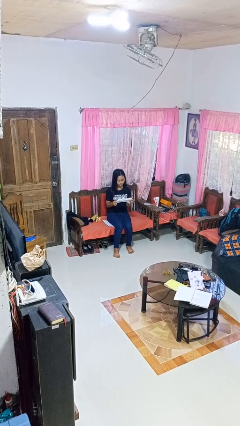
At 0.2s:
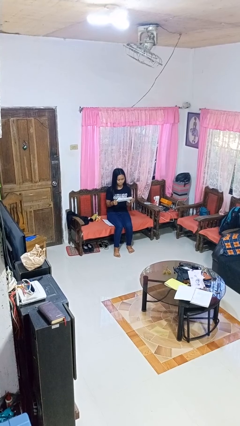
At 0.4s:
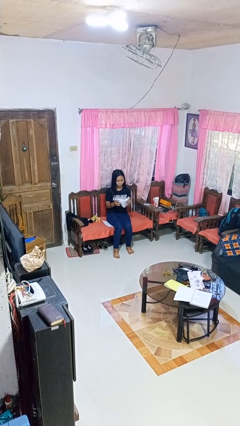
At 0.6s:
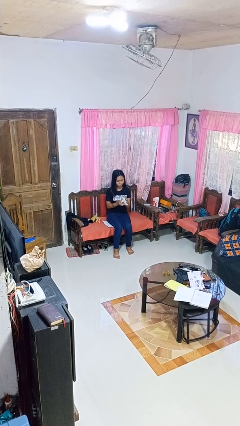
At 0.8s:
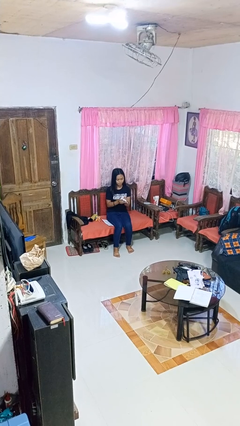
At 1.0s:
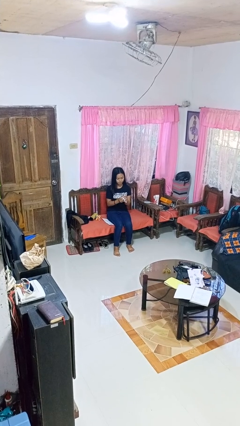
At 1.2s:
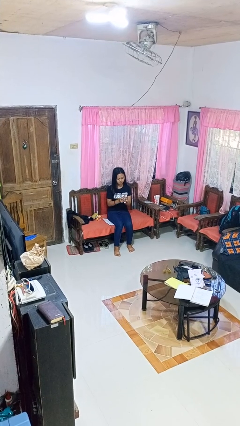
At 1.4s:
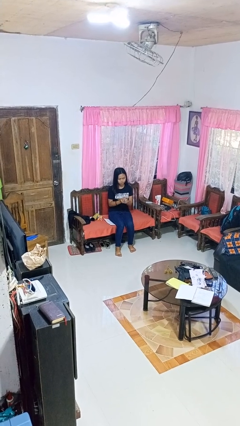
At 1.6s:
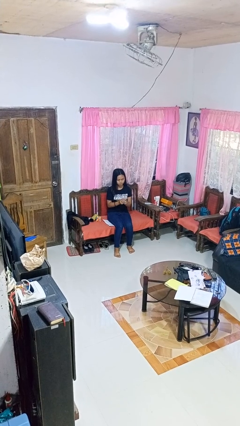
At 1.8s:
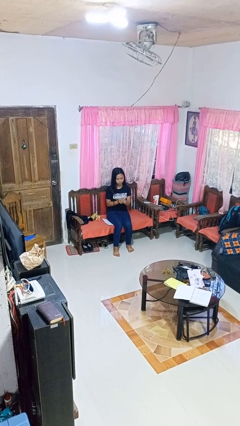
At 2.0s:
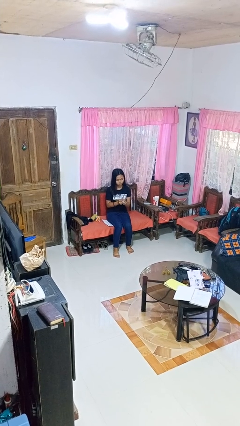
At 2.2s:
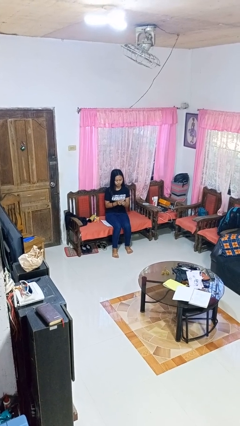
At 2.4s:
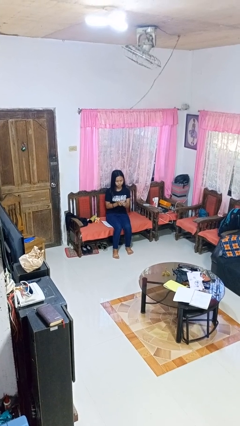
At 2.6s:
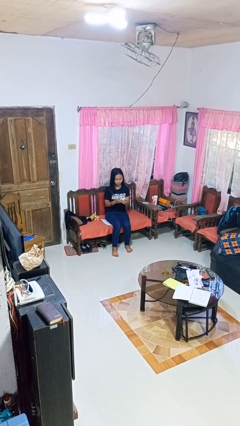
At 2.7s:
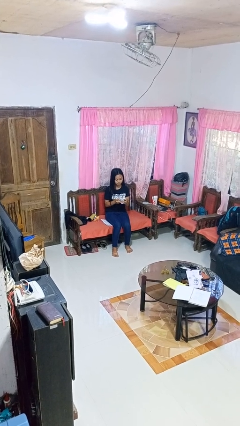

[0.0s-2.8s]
person crumples paper

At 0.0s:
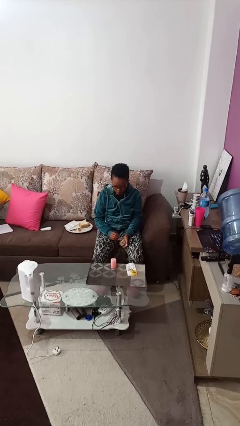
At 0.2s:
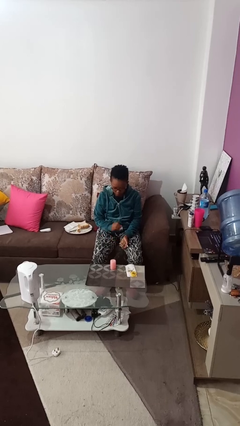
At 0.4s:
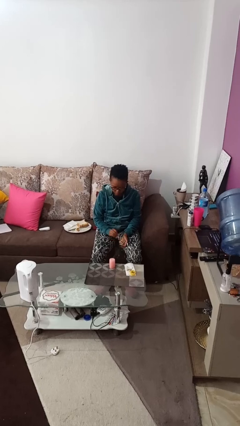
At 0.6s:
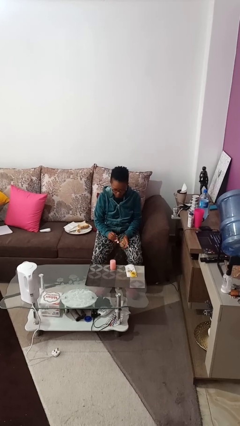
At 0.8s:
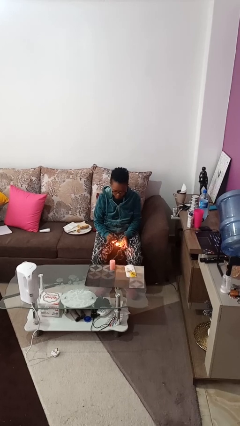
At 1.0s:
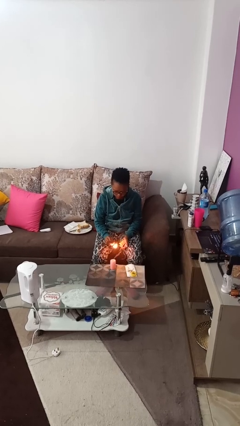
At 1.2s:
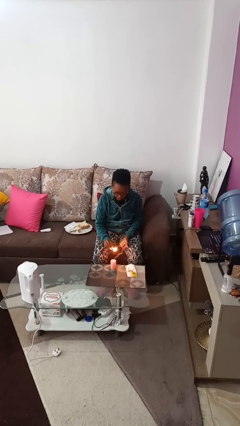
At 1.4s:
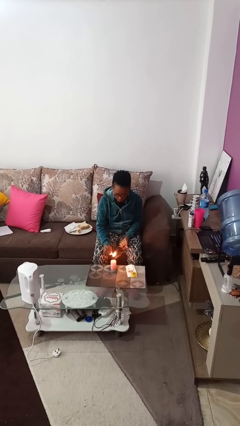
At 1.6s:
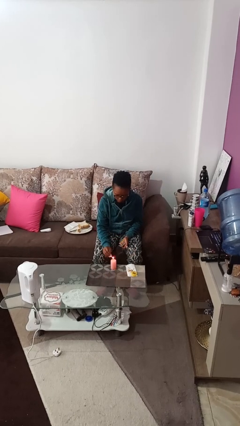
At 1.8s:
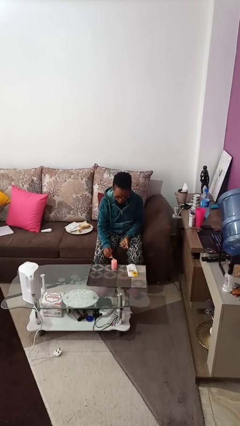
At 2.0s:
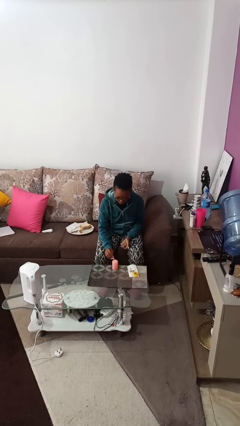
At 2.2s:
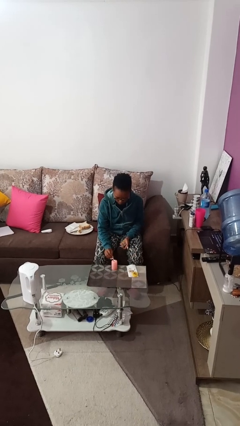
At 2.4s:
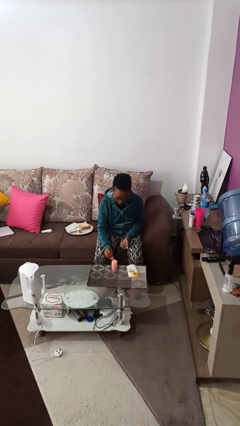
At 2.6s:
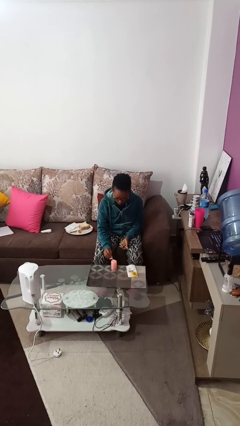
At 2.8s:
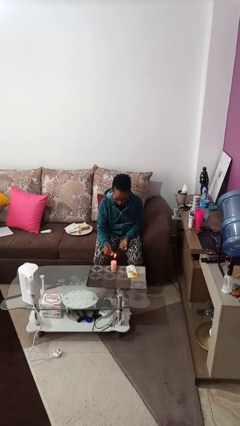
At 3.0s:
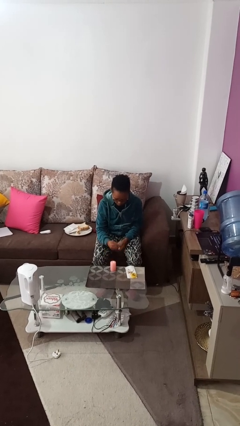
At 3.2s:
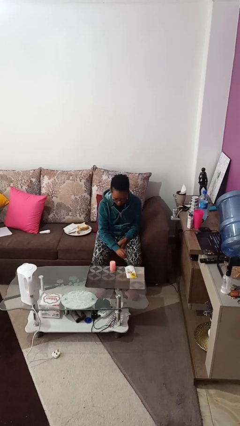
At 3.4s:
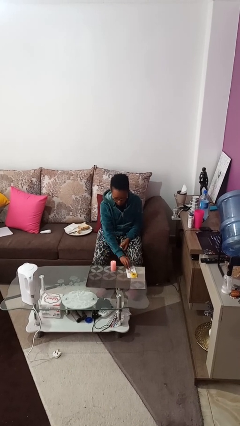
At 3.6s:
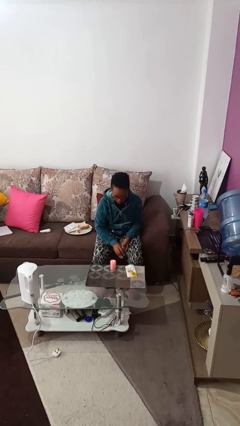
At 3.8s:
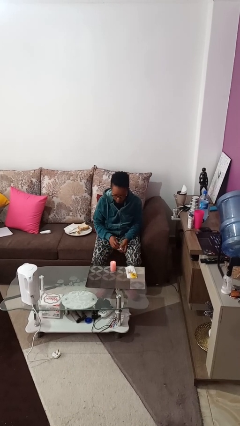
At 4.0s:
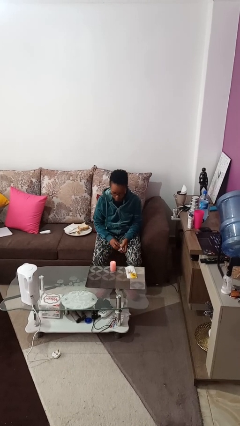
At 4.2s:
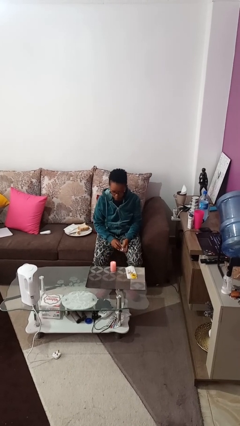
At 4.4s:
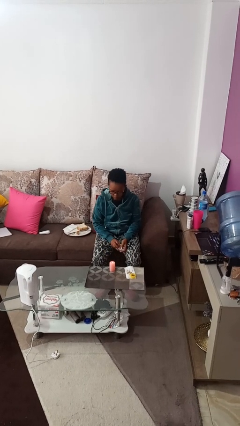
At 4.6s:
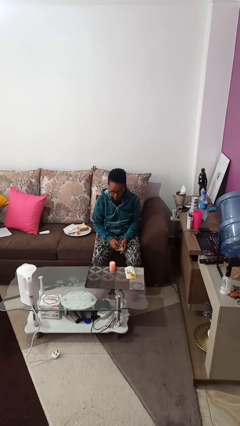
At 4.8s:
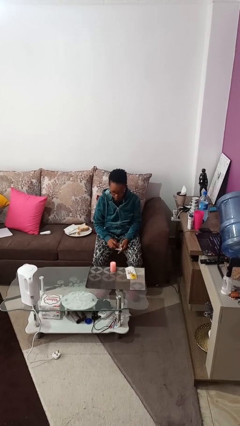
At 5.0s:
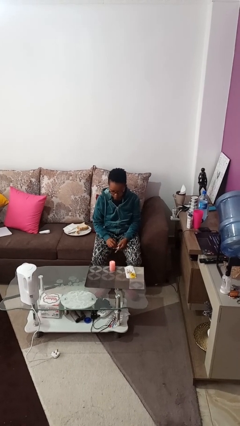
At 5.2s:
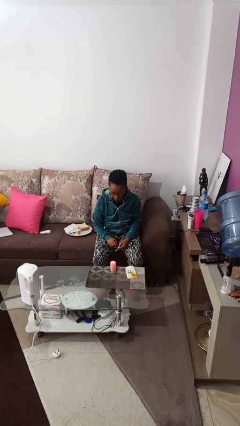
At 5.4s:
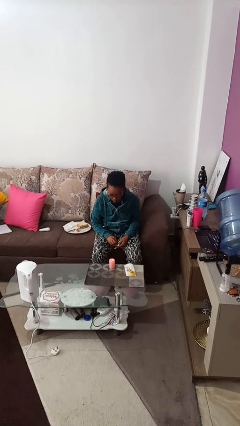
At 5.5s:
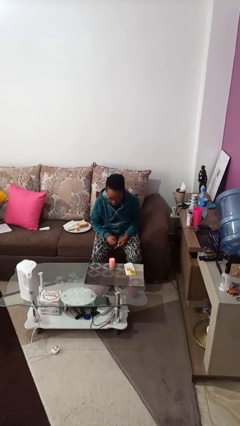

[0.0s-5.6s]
person lights candle

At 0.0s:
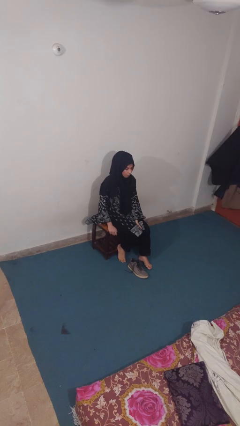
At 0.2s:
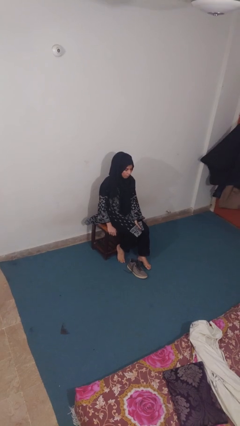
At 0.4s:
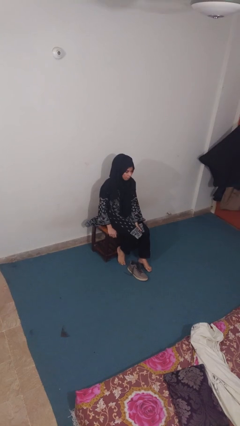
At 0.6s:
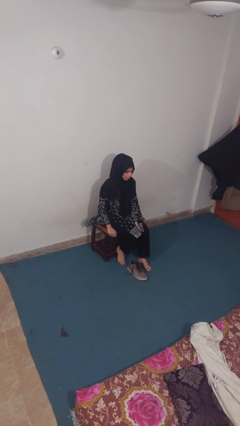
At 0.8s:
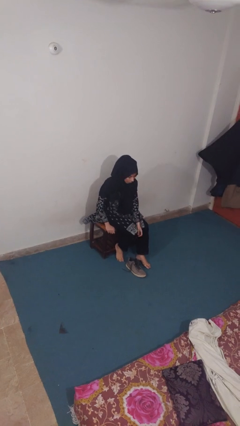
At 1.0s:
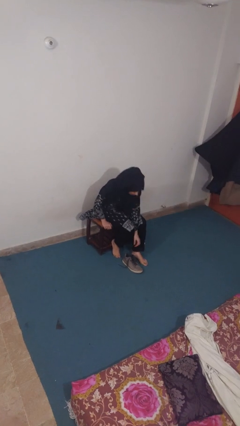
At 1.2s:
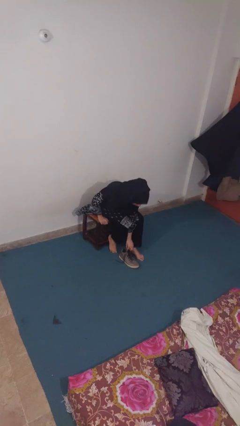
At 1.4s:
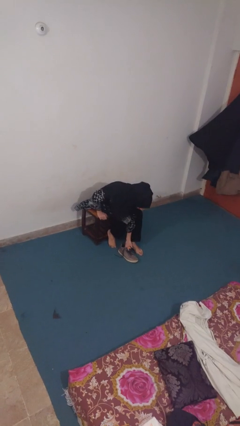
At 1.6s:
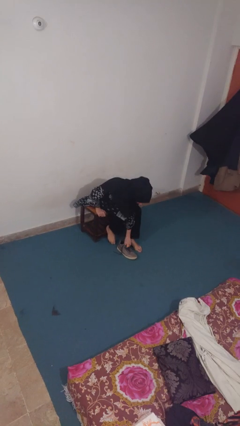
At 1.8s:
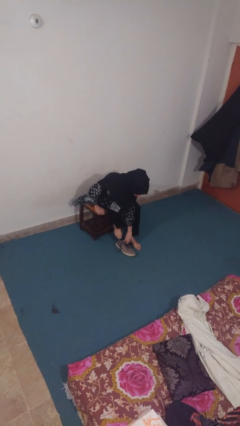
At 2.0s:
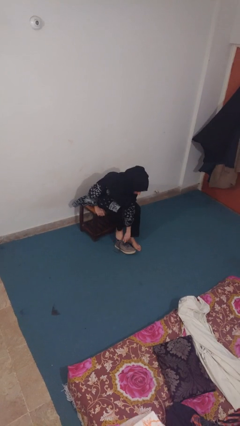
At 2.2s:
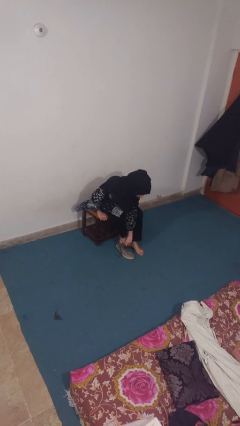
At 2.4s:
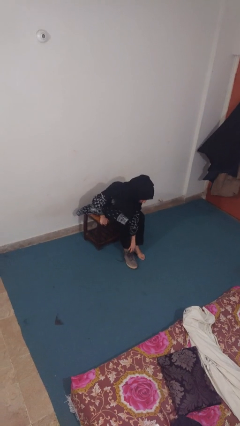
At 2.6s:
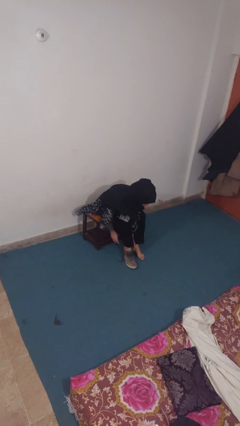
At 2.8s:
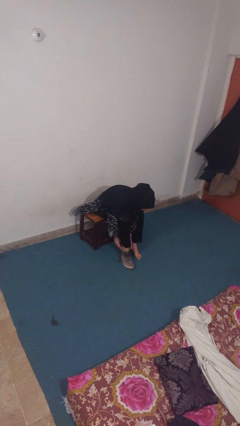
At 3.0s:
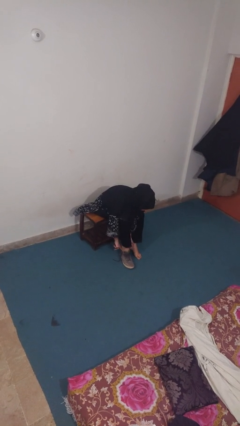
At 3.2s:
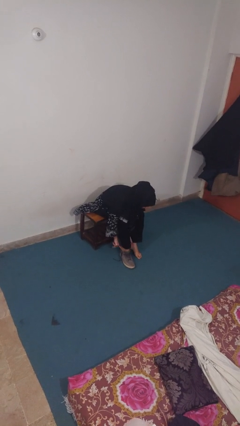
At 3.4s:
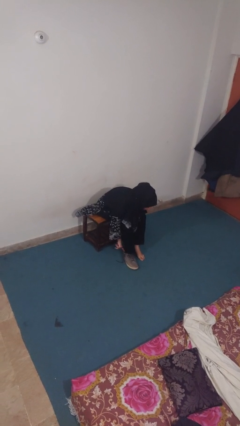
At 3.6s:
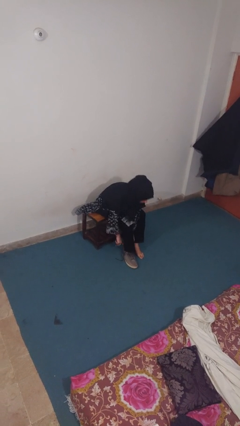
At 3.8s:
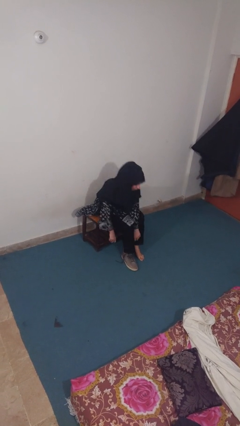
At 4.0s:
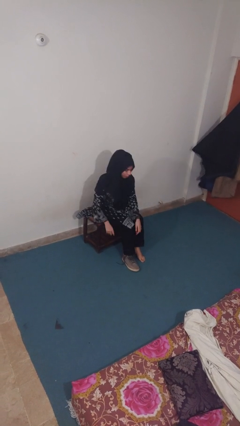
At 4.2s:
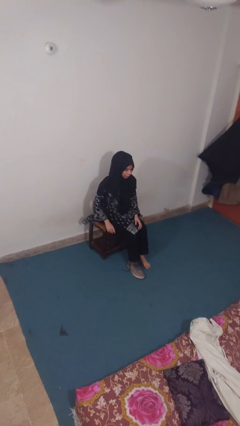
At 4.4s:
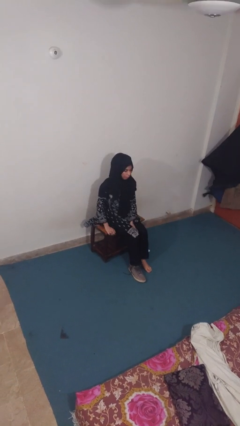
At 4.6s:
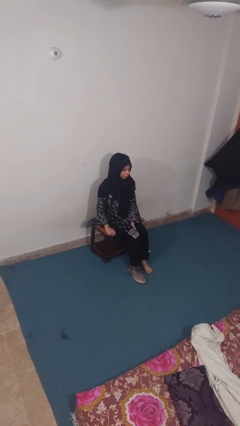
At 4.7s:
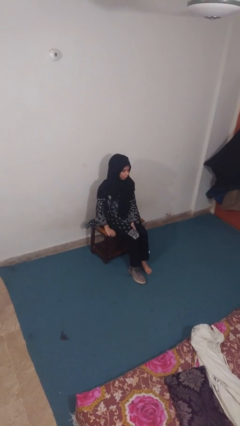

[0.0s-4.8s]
person puts on boots

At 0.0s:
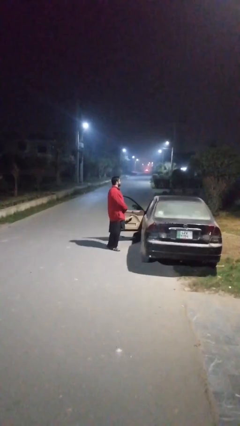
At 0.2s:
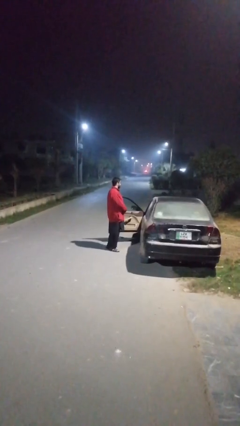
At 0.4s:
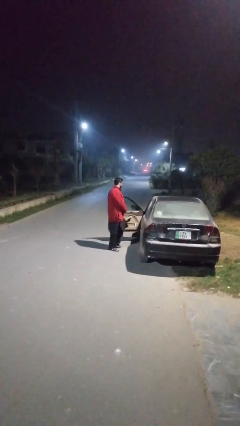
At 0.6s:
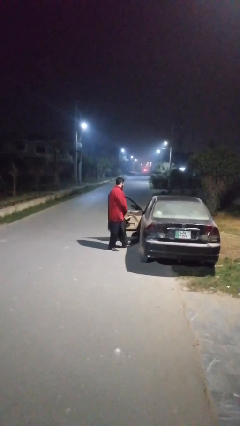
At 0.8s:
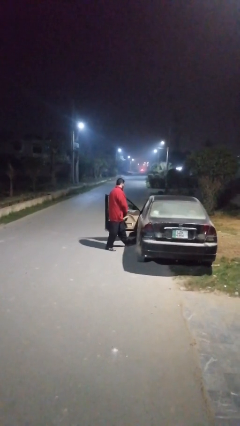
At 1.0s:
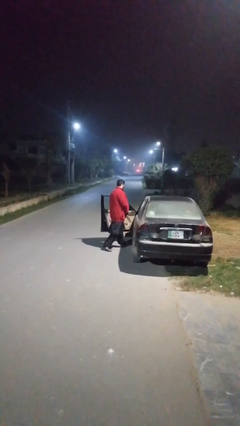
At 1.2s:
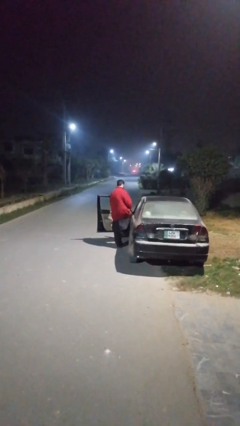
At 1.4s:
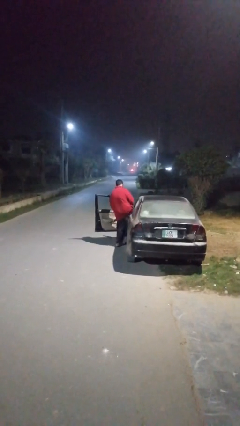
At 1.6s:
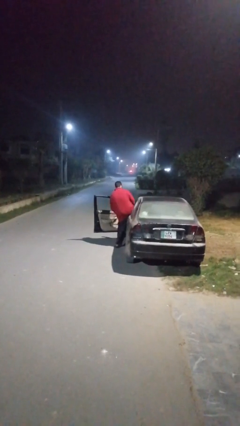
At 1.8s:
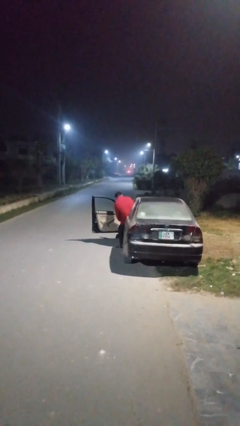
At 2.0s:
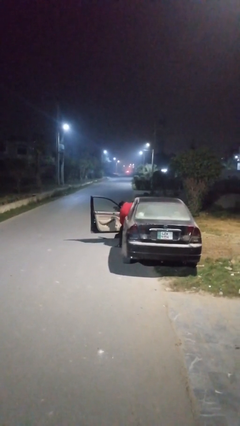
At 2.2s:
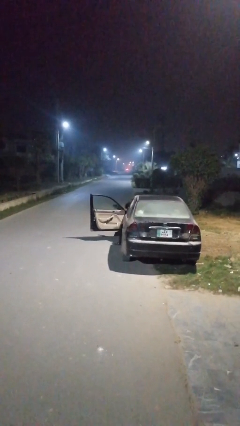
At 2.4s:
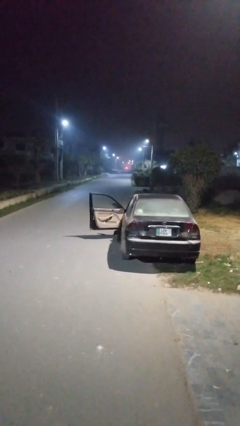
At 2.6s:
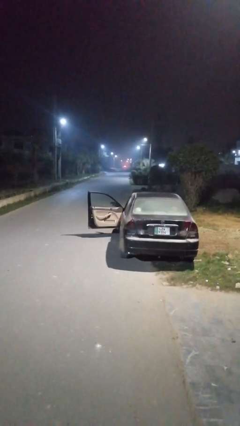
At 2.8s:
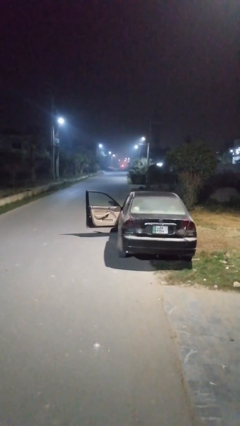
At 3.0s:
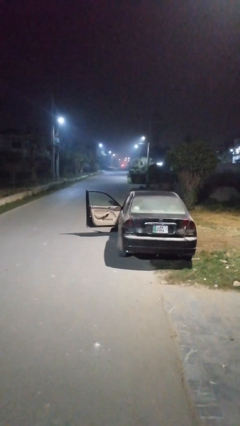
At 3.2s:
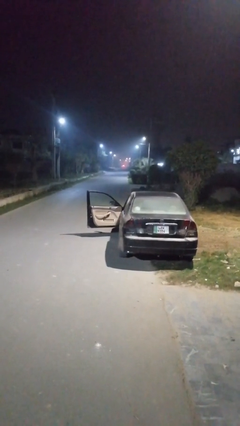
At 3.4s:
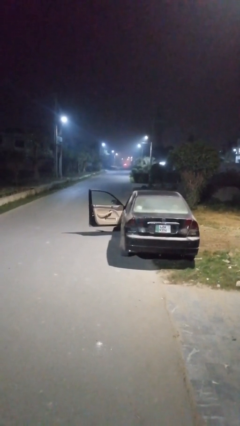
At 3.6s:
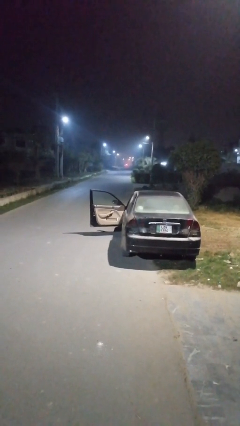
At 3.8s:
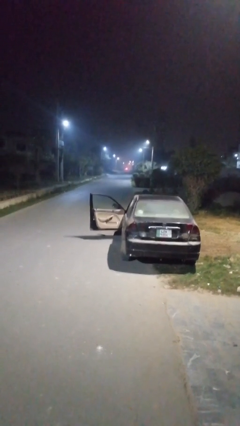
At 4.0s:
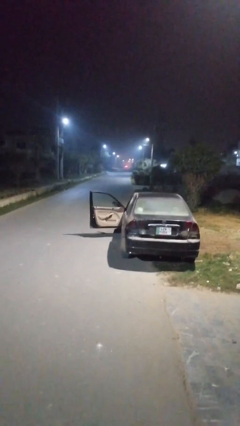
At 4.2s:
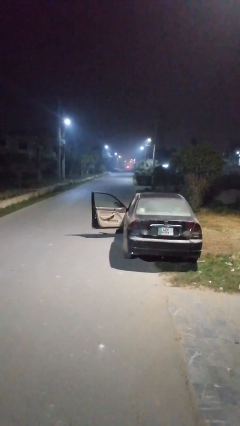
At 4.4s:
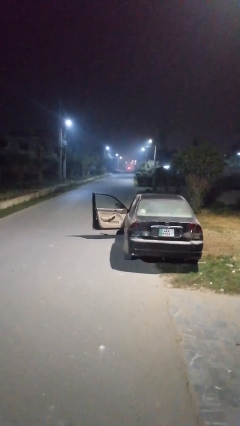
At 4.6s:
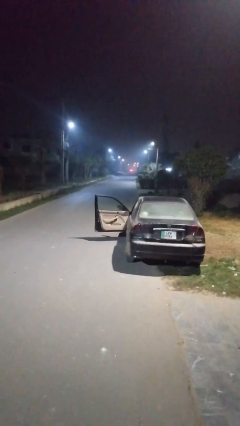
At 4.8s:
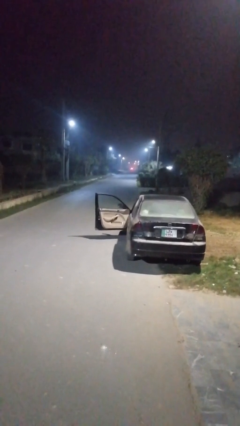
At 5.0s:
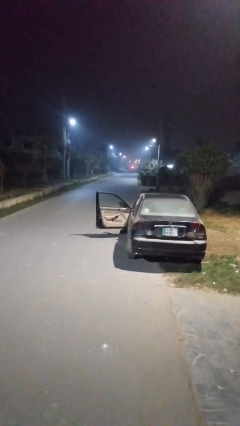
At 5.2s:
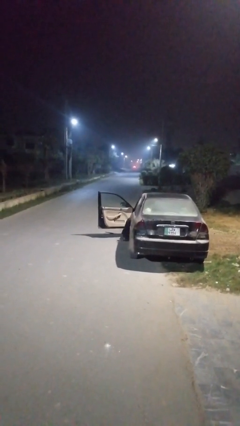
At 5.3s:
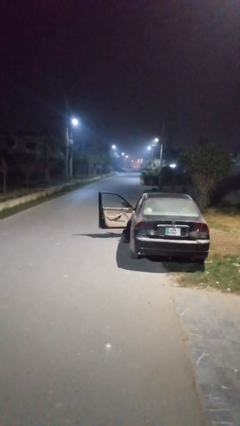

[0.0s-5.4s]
person enters car
